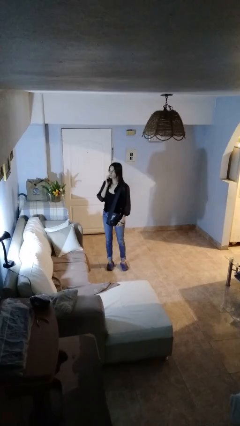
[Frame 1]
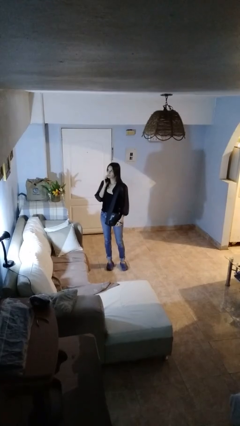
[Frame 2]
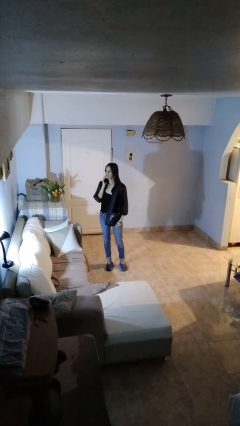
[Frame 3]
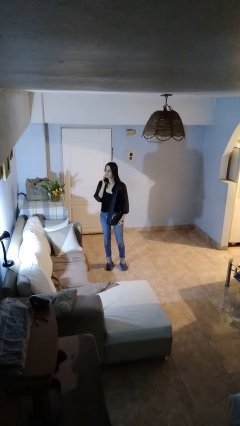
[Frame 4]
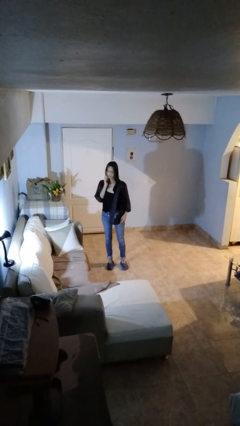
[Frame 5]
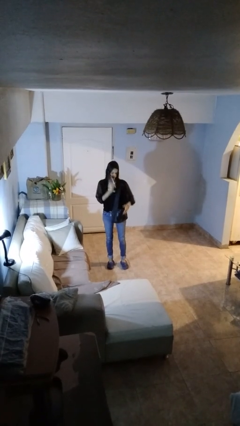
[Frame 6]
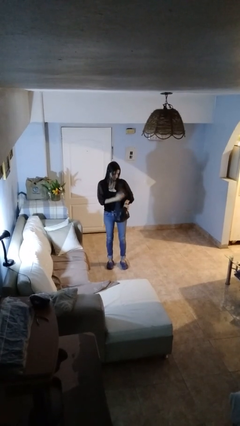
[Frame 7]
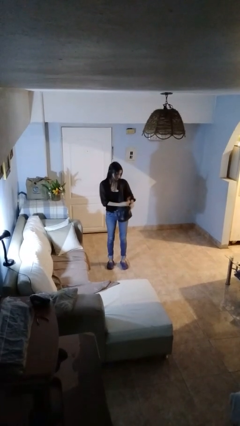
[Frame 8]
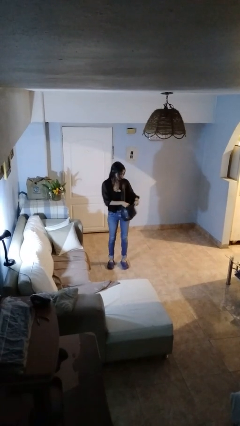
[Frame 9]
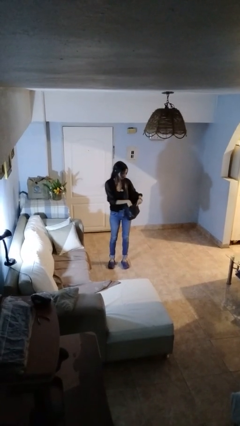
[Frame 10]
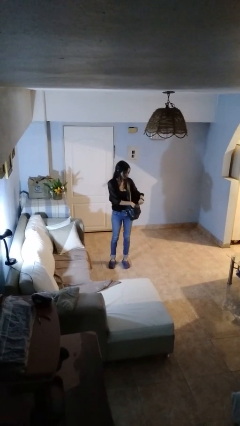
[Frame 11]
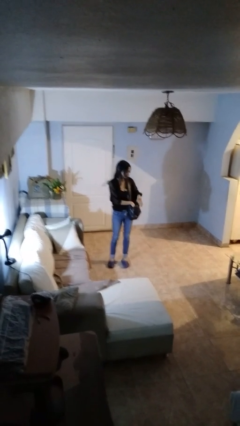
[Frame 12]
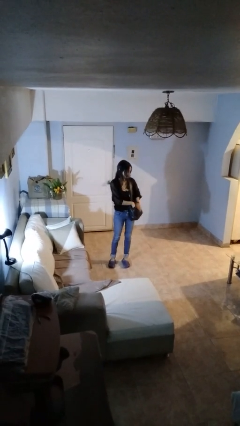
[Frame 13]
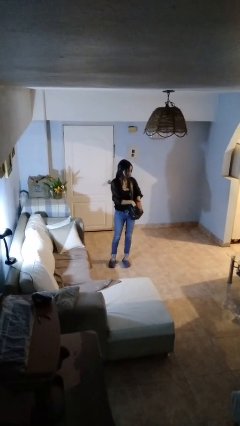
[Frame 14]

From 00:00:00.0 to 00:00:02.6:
person puts object into purse

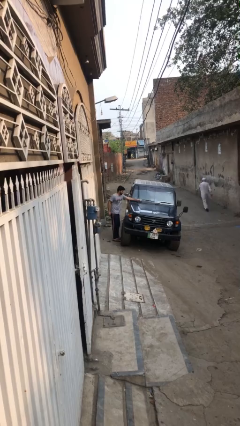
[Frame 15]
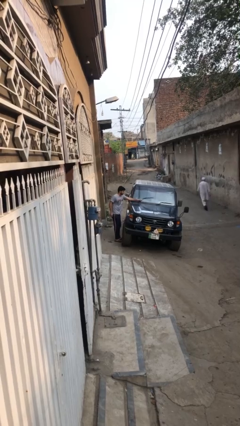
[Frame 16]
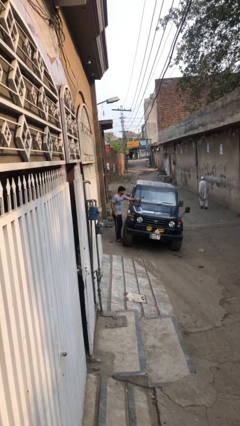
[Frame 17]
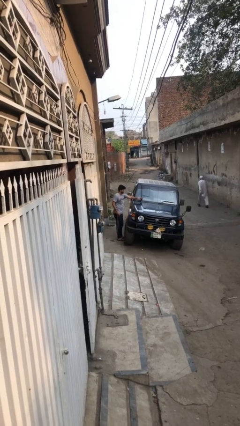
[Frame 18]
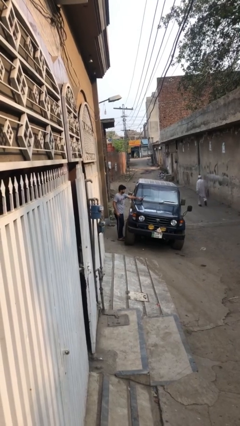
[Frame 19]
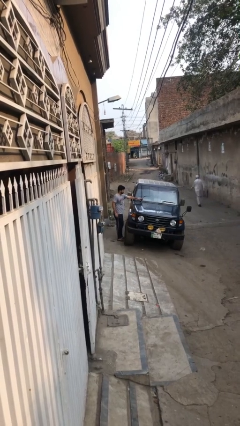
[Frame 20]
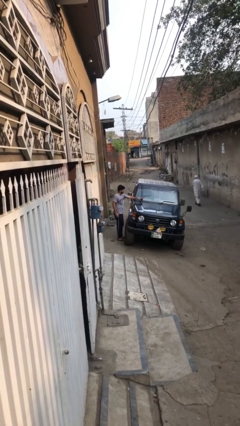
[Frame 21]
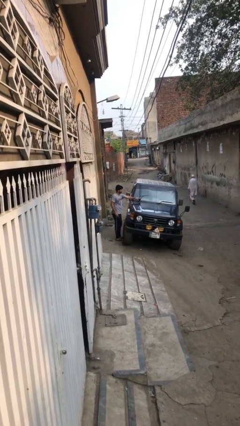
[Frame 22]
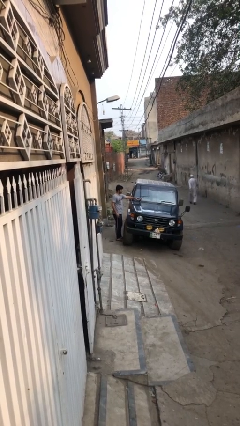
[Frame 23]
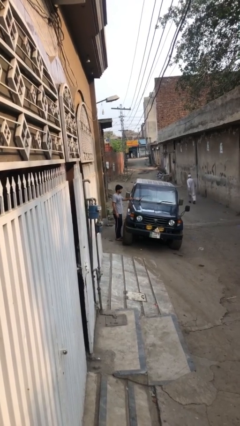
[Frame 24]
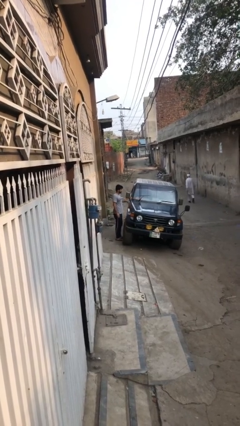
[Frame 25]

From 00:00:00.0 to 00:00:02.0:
person flips up car wipers

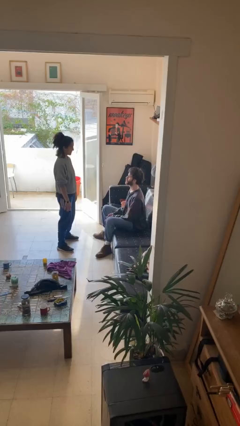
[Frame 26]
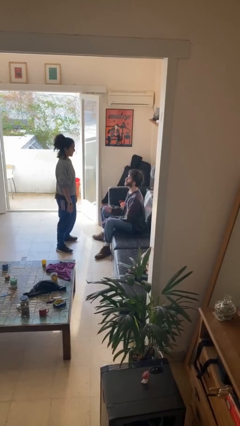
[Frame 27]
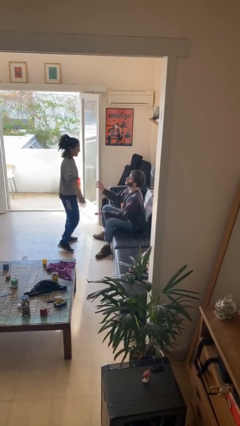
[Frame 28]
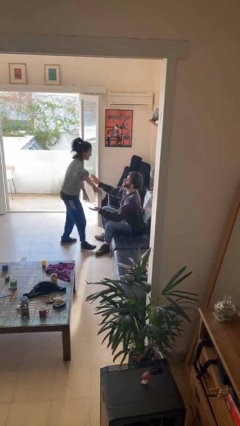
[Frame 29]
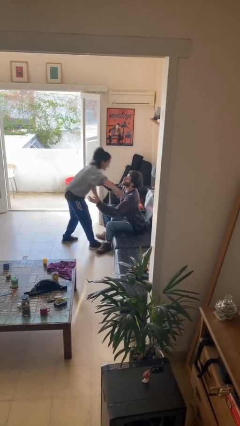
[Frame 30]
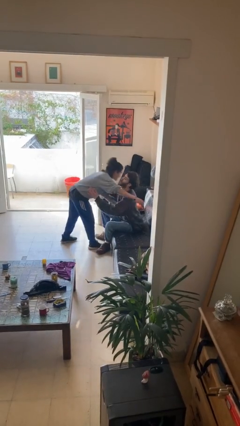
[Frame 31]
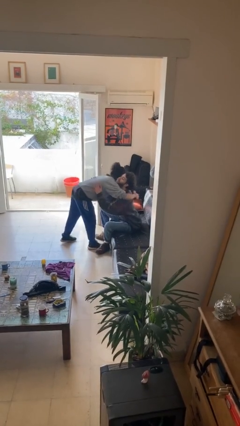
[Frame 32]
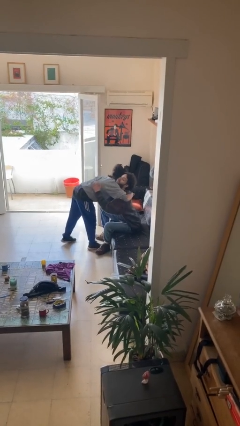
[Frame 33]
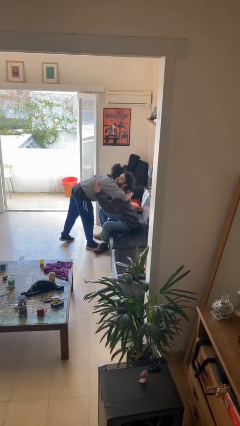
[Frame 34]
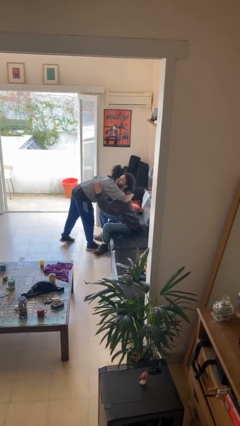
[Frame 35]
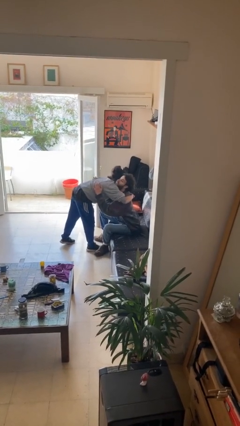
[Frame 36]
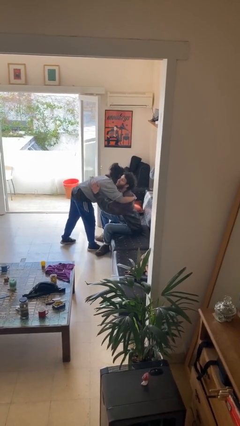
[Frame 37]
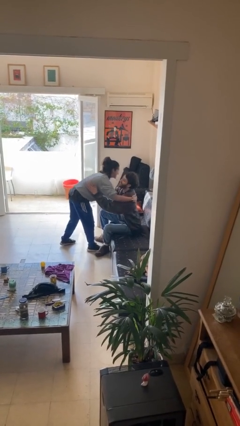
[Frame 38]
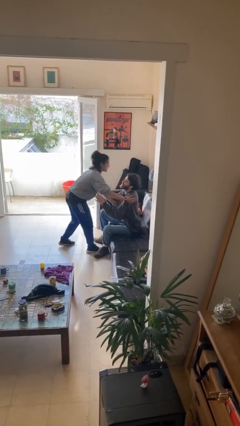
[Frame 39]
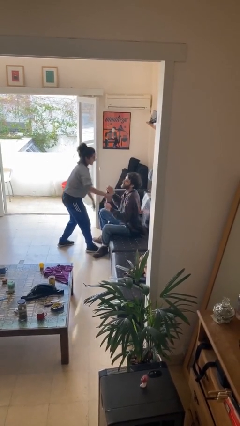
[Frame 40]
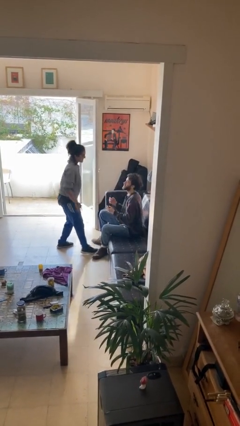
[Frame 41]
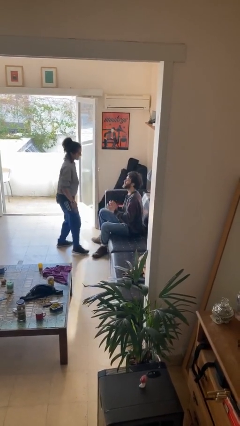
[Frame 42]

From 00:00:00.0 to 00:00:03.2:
person embraces person

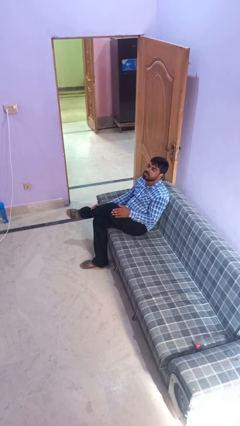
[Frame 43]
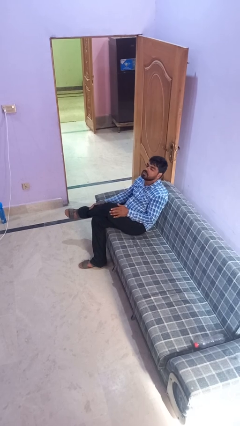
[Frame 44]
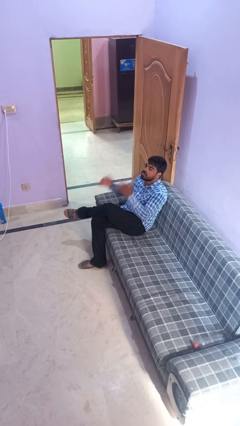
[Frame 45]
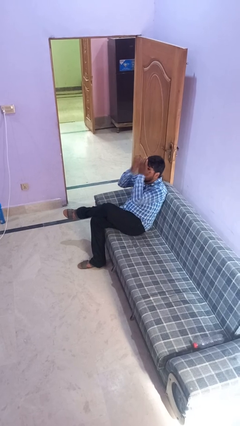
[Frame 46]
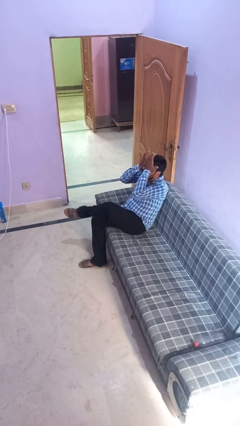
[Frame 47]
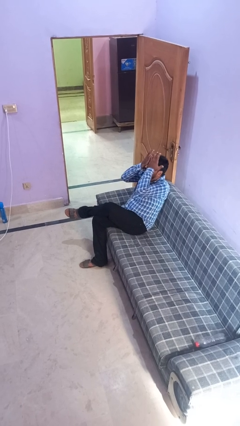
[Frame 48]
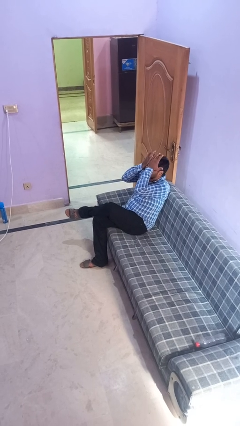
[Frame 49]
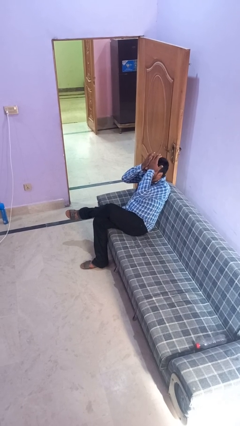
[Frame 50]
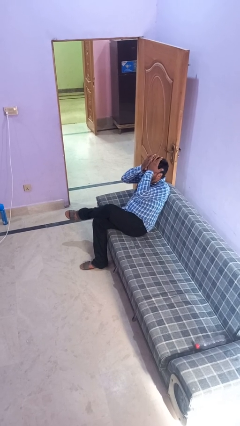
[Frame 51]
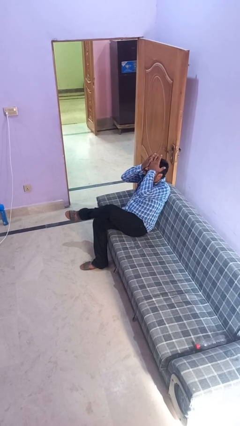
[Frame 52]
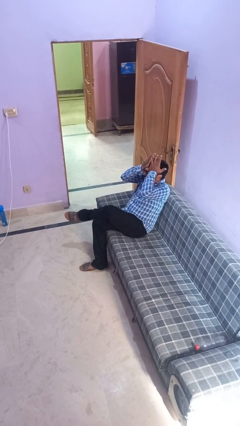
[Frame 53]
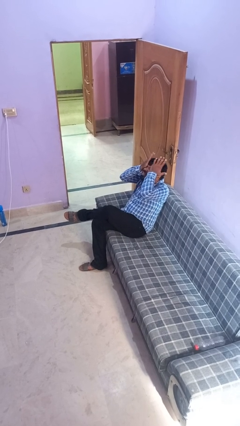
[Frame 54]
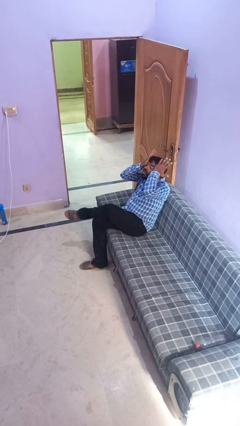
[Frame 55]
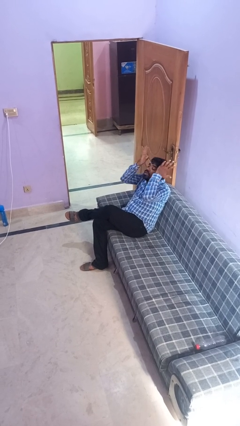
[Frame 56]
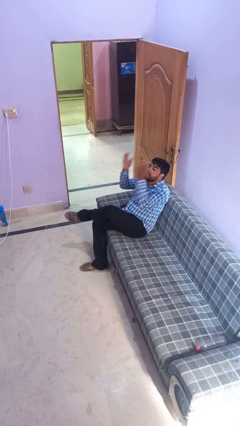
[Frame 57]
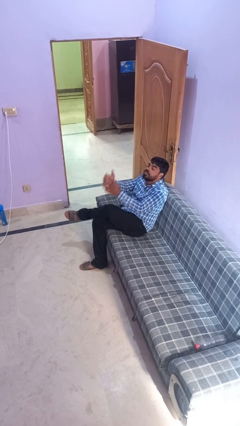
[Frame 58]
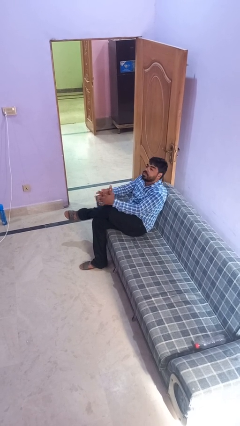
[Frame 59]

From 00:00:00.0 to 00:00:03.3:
person rubs eyes

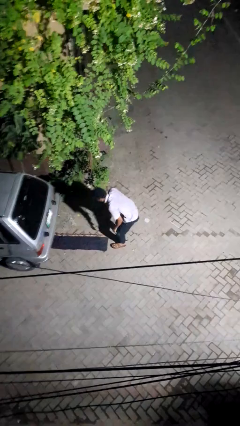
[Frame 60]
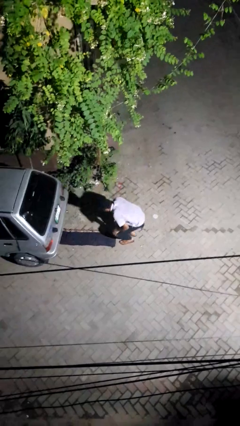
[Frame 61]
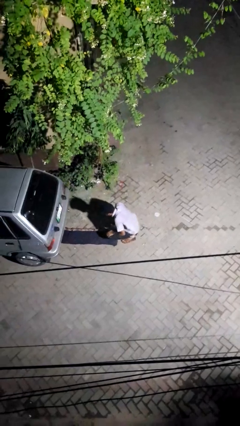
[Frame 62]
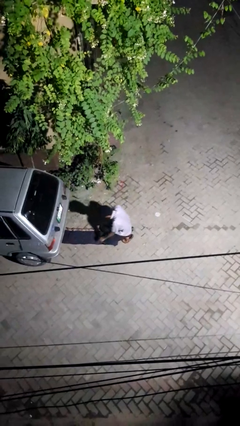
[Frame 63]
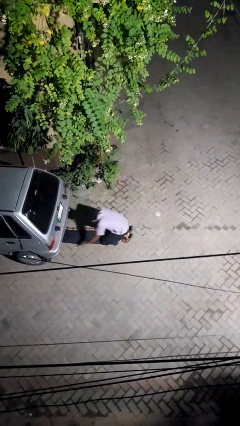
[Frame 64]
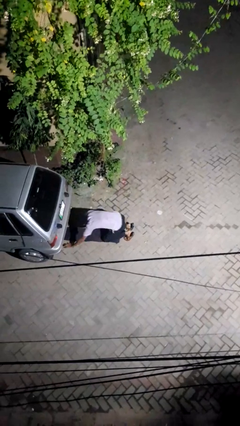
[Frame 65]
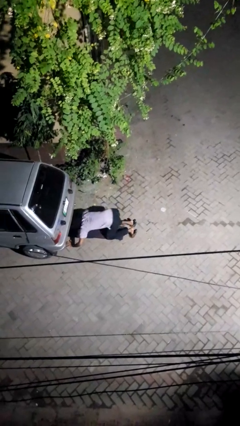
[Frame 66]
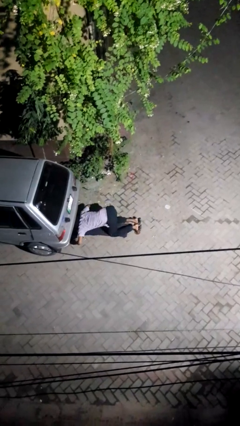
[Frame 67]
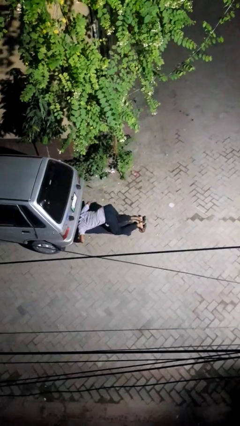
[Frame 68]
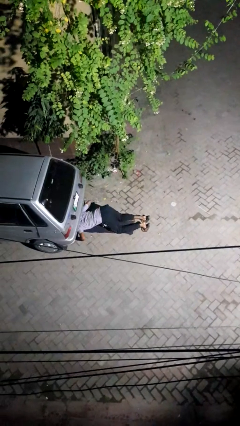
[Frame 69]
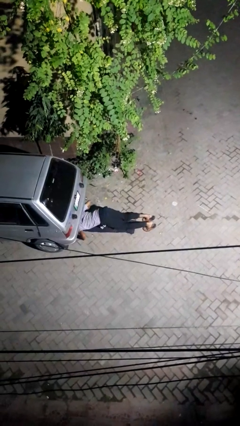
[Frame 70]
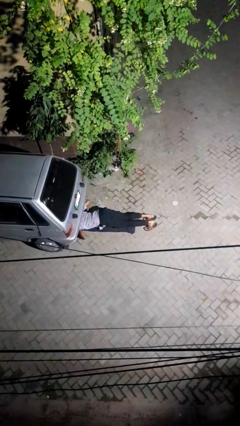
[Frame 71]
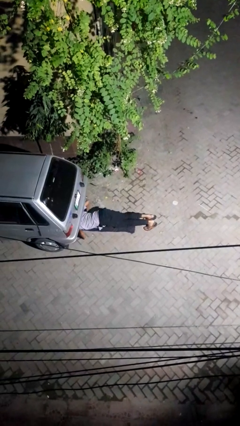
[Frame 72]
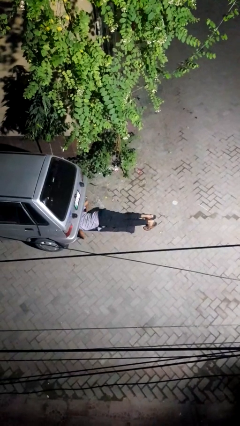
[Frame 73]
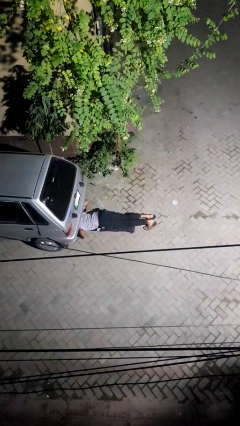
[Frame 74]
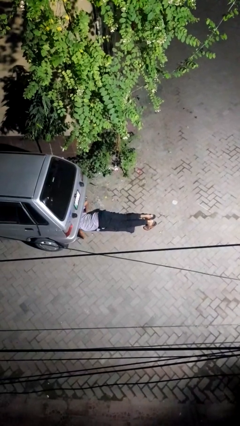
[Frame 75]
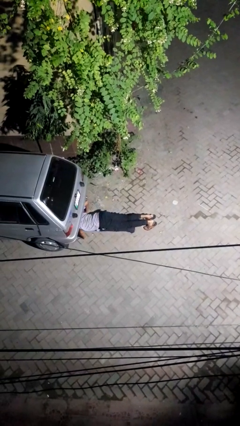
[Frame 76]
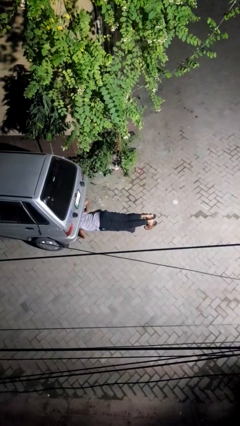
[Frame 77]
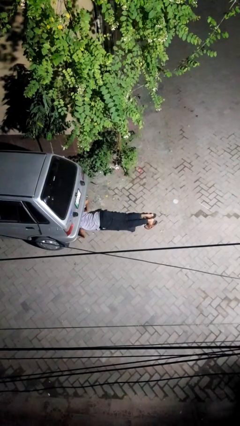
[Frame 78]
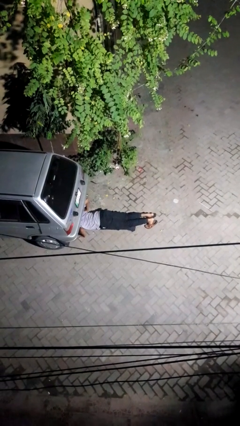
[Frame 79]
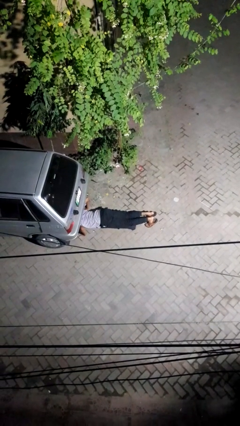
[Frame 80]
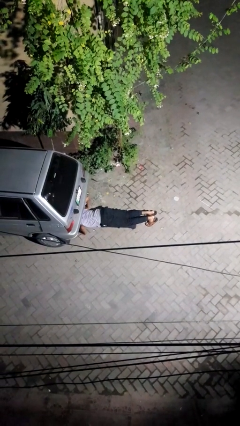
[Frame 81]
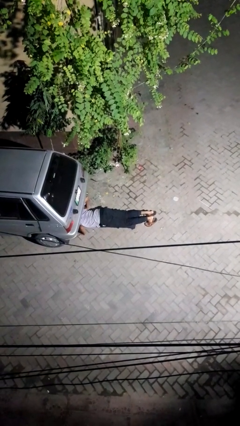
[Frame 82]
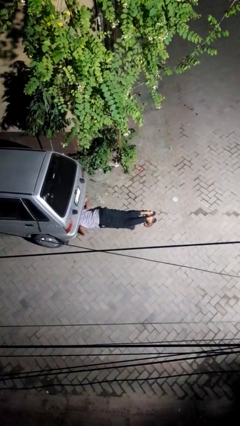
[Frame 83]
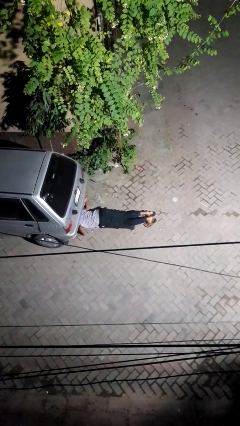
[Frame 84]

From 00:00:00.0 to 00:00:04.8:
person crawls out from under vehicle

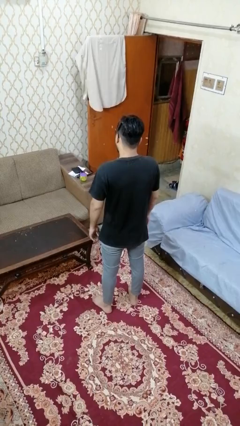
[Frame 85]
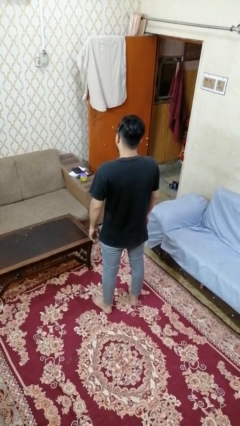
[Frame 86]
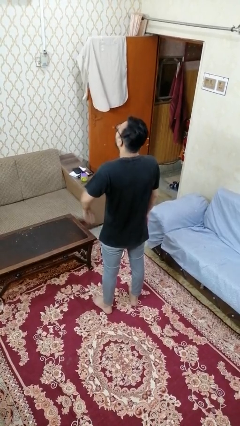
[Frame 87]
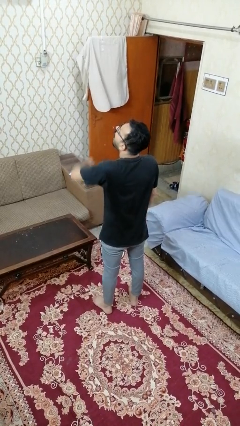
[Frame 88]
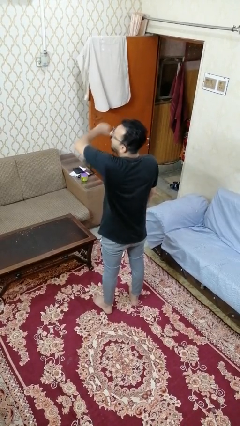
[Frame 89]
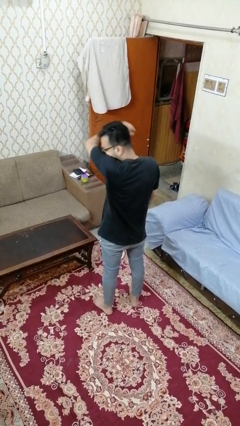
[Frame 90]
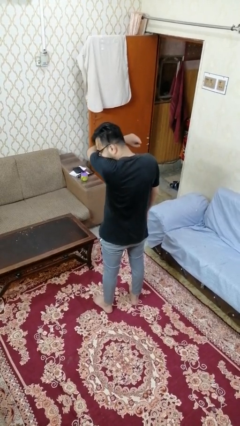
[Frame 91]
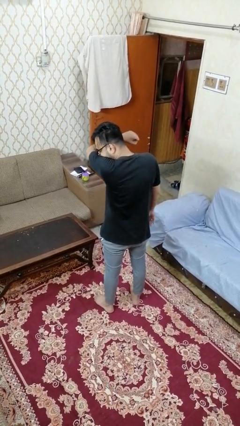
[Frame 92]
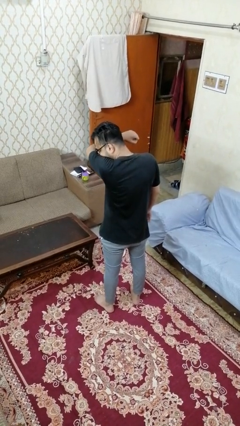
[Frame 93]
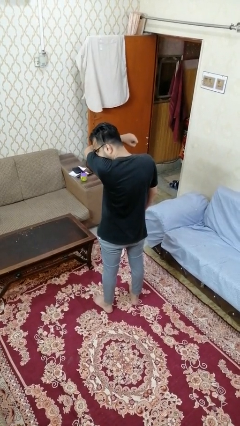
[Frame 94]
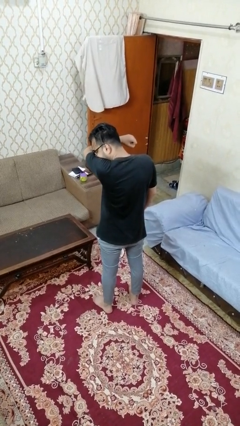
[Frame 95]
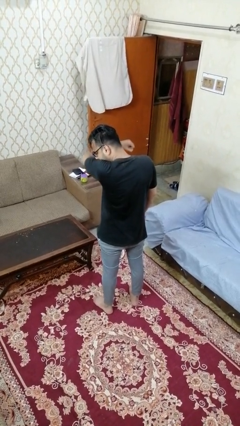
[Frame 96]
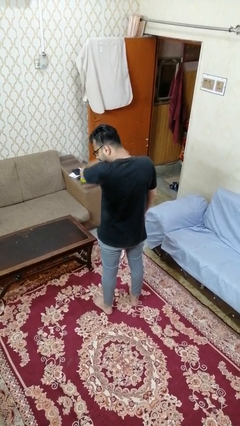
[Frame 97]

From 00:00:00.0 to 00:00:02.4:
person sneezes into arm
